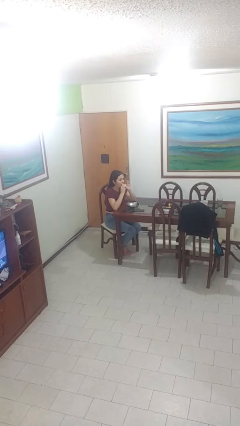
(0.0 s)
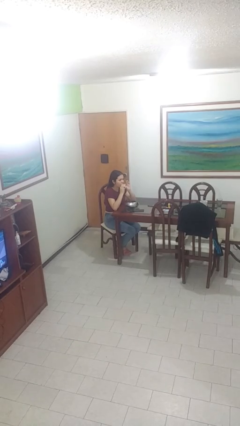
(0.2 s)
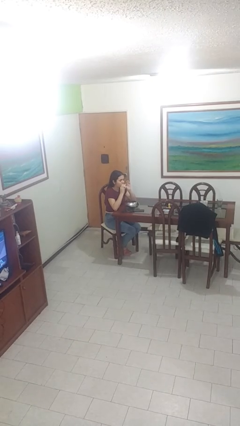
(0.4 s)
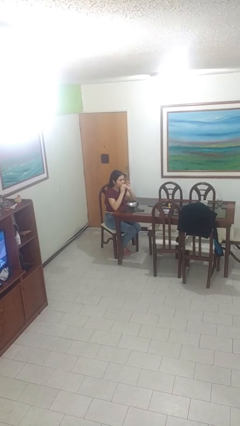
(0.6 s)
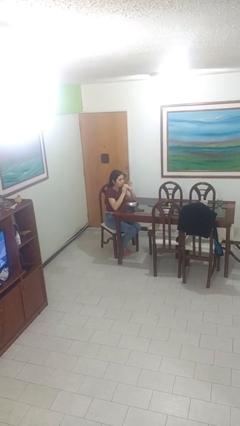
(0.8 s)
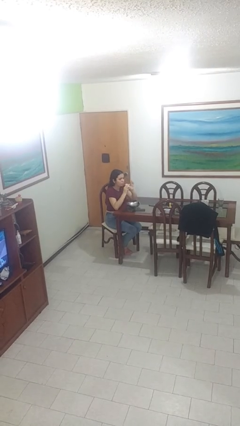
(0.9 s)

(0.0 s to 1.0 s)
person eats with hands

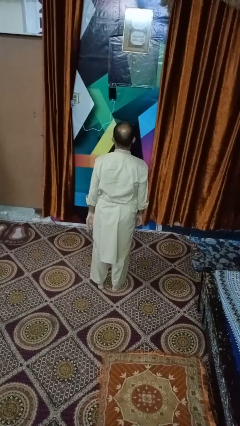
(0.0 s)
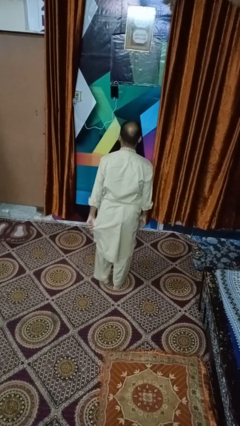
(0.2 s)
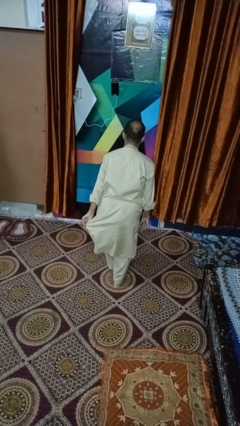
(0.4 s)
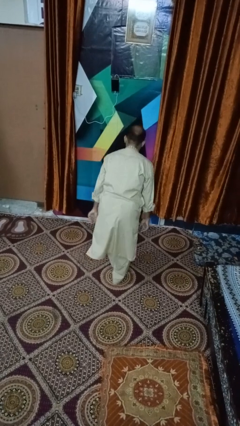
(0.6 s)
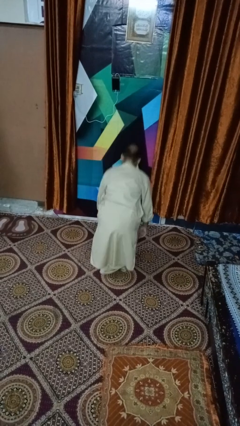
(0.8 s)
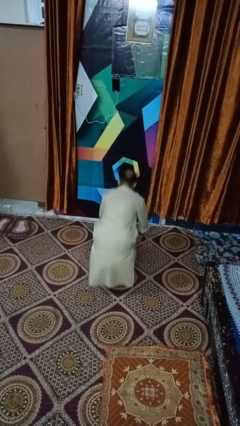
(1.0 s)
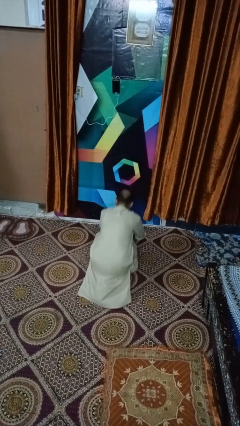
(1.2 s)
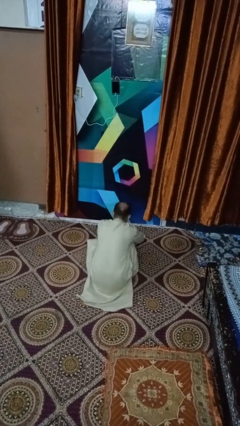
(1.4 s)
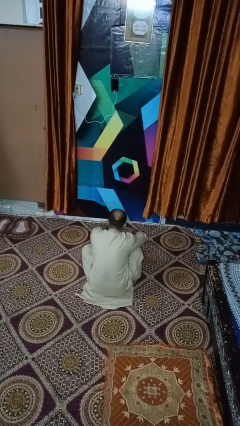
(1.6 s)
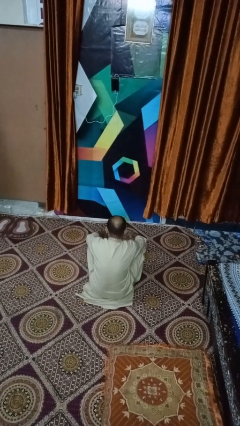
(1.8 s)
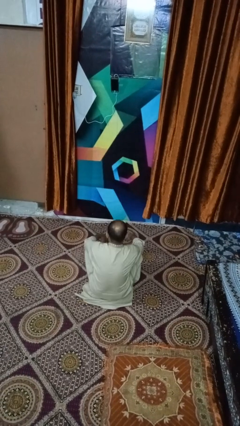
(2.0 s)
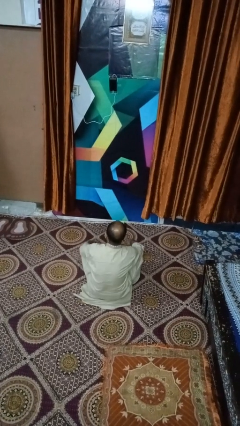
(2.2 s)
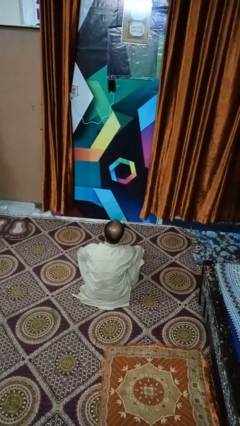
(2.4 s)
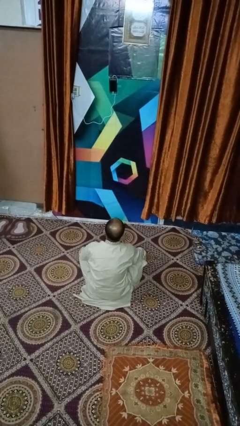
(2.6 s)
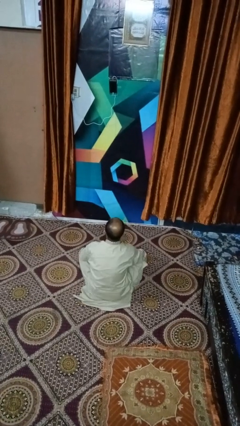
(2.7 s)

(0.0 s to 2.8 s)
person sits crisscross

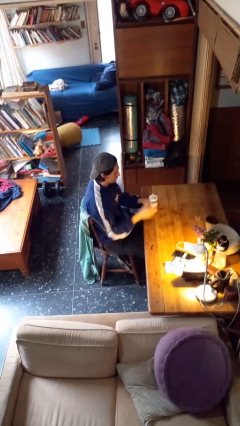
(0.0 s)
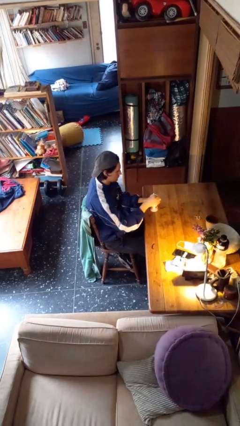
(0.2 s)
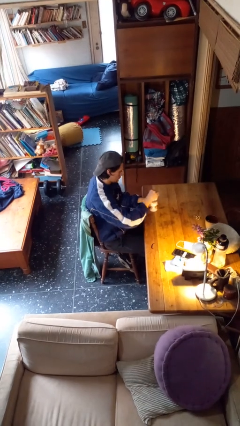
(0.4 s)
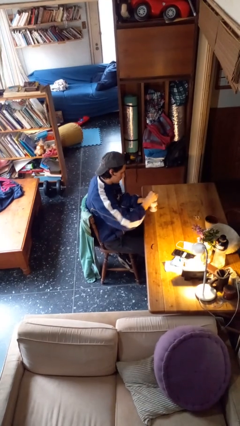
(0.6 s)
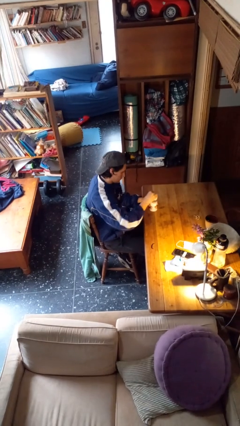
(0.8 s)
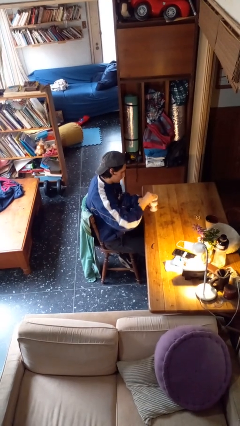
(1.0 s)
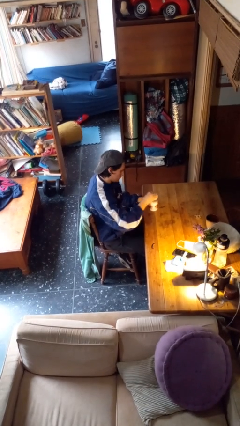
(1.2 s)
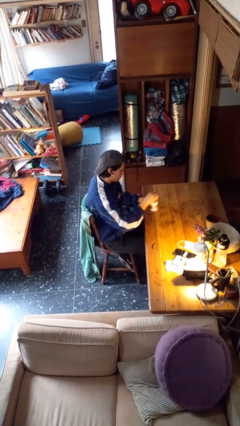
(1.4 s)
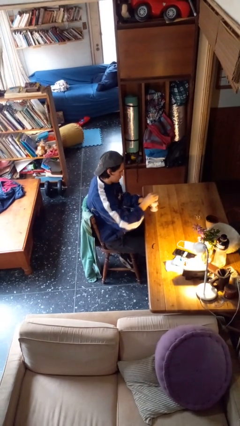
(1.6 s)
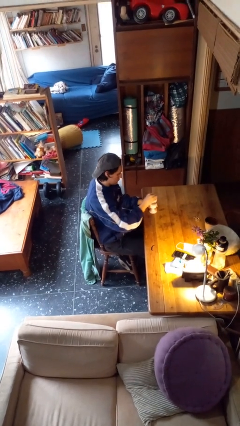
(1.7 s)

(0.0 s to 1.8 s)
person stirs mug

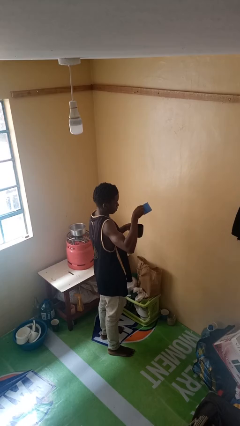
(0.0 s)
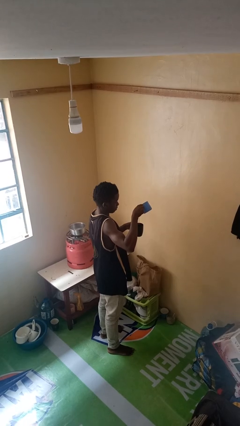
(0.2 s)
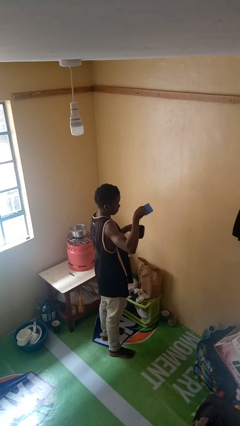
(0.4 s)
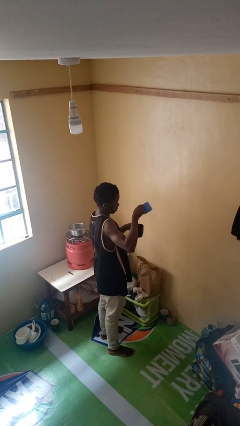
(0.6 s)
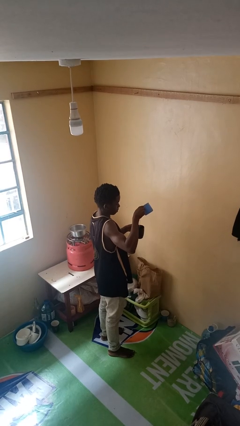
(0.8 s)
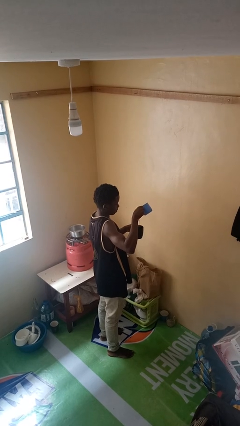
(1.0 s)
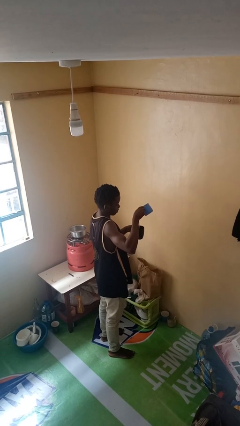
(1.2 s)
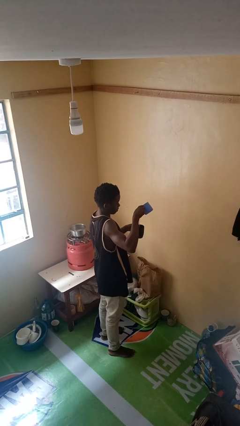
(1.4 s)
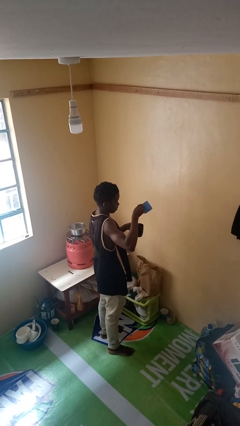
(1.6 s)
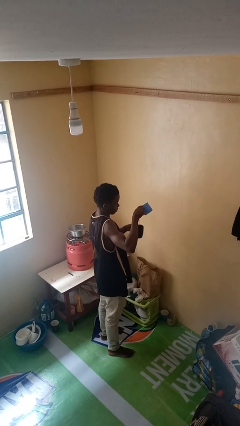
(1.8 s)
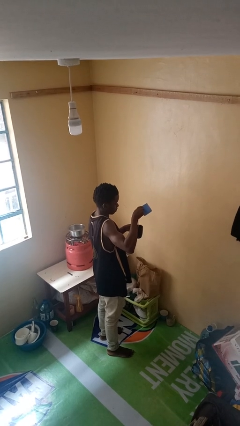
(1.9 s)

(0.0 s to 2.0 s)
person pours coffee into mug

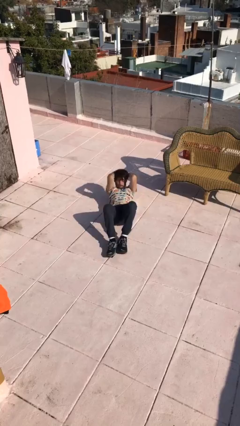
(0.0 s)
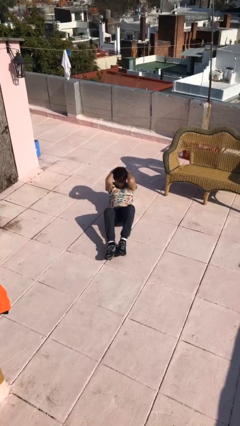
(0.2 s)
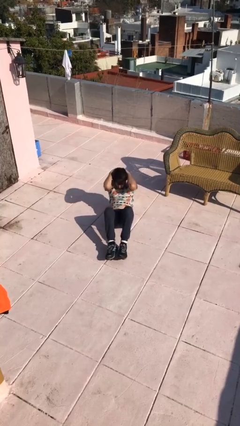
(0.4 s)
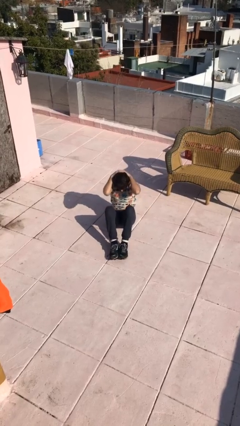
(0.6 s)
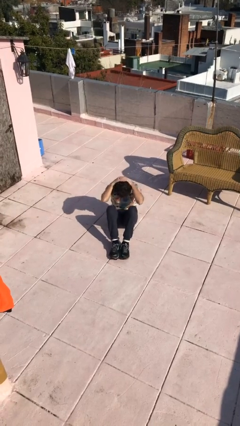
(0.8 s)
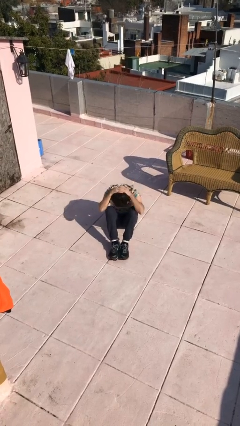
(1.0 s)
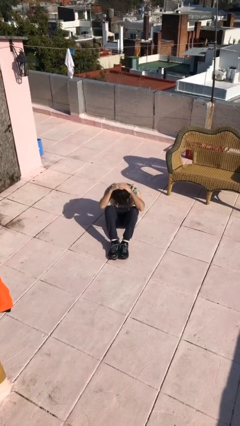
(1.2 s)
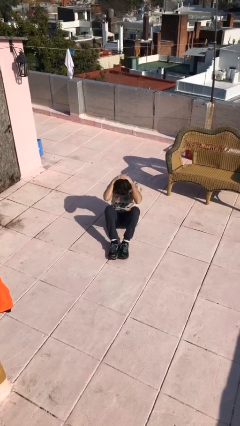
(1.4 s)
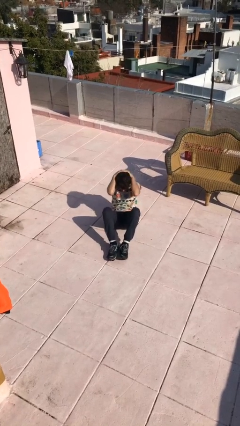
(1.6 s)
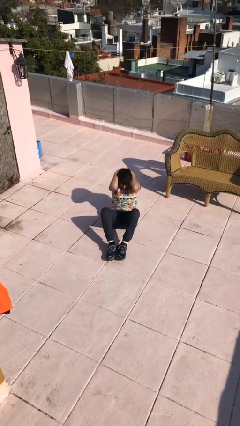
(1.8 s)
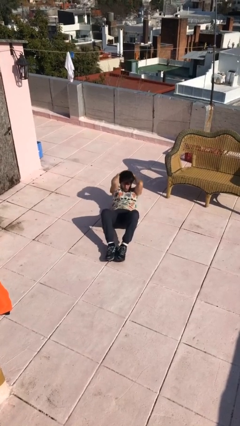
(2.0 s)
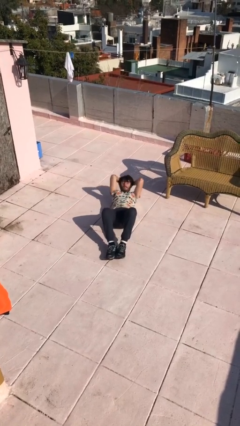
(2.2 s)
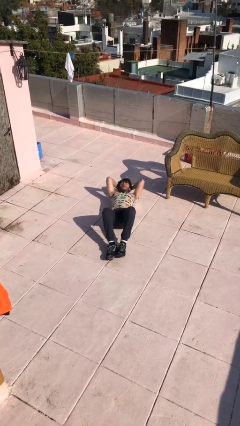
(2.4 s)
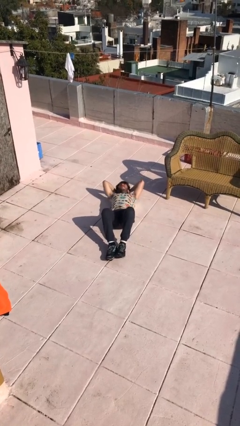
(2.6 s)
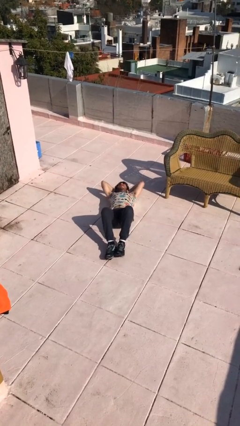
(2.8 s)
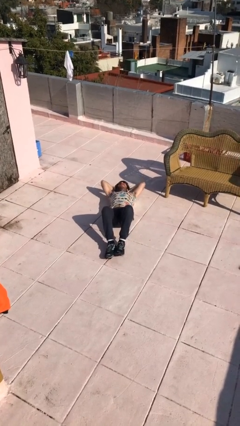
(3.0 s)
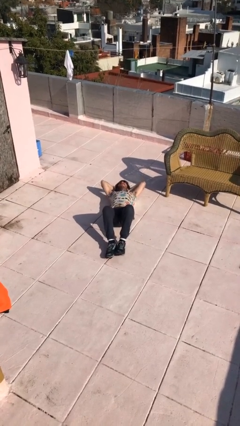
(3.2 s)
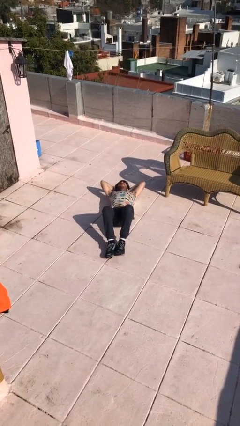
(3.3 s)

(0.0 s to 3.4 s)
person exercises with situp

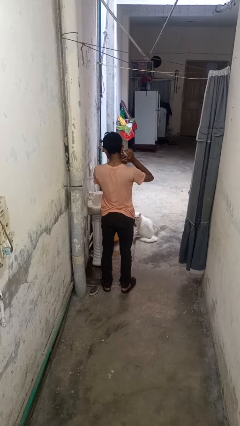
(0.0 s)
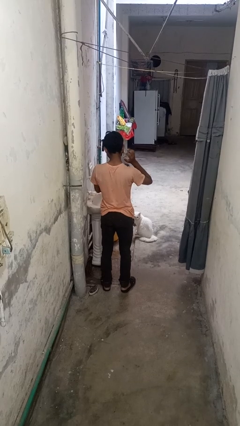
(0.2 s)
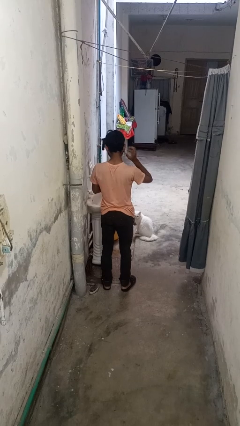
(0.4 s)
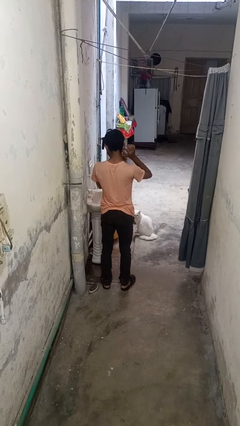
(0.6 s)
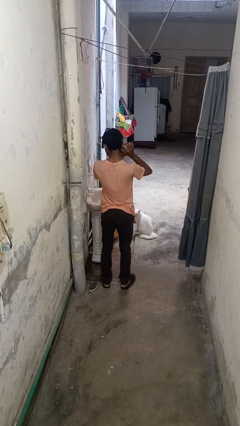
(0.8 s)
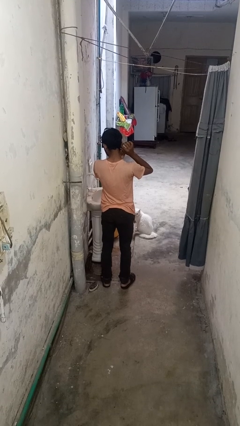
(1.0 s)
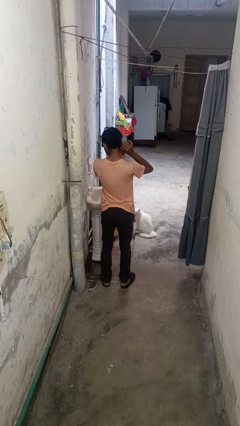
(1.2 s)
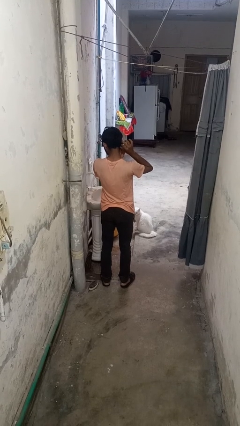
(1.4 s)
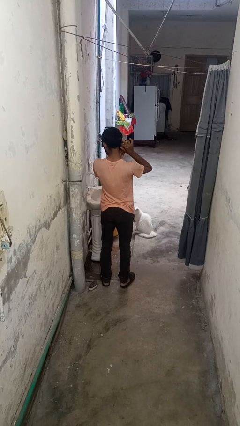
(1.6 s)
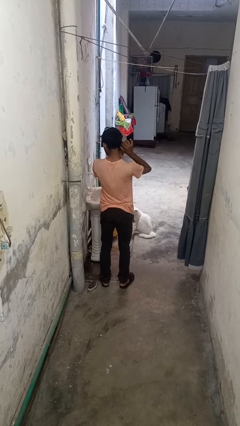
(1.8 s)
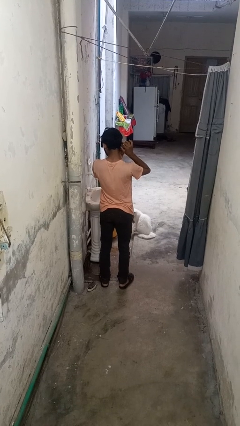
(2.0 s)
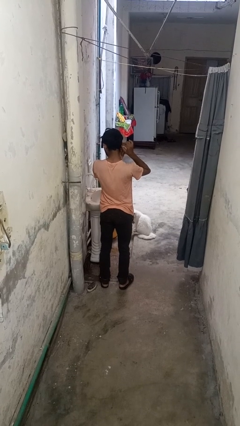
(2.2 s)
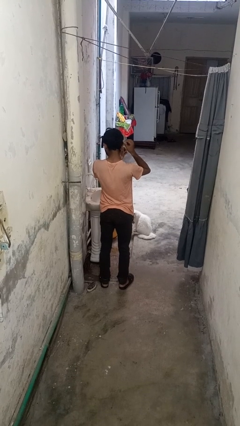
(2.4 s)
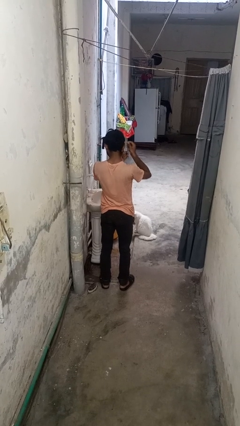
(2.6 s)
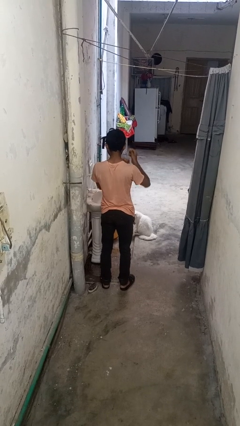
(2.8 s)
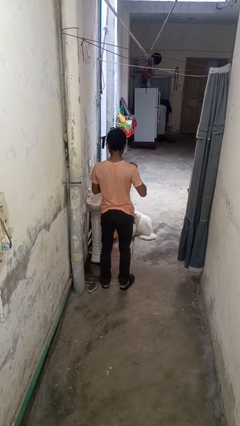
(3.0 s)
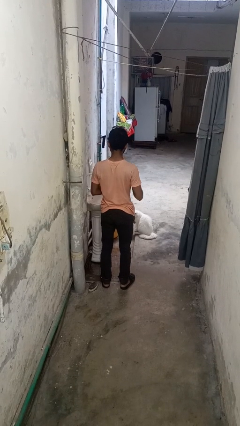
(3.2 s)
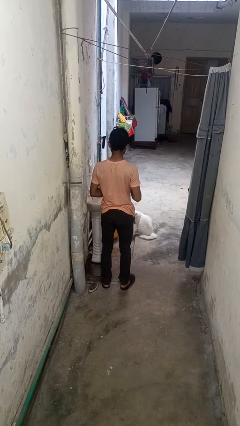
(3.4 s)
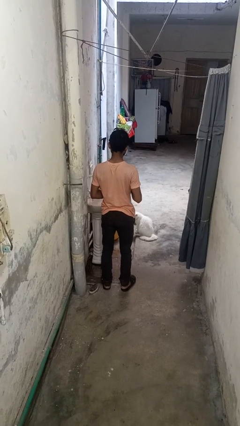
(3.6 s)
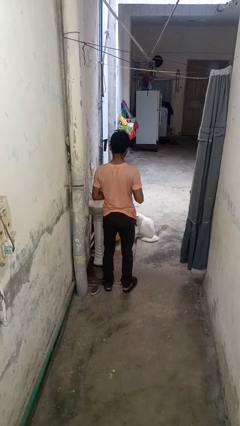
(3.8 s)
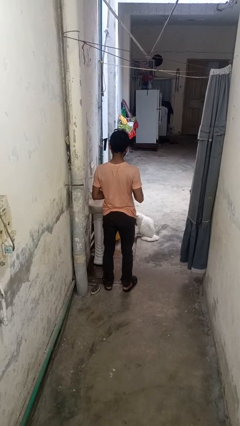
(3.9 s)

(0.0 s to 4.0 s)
person takes off earrings

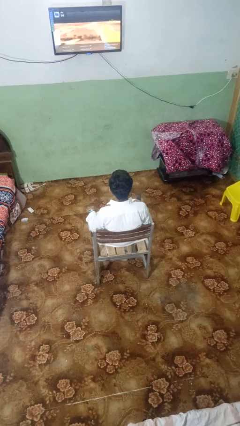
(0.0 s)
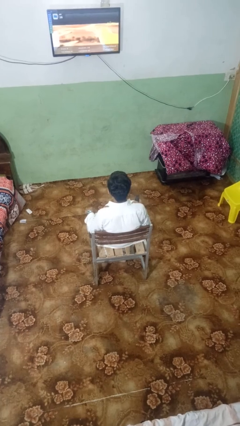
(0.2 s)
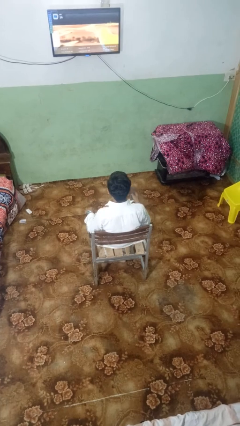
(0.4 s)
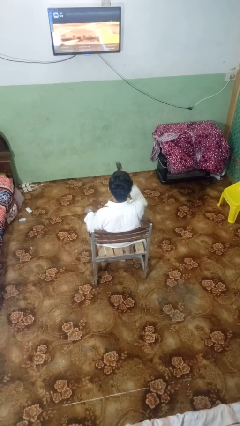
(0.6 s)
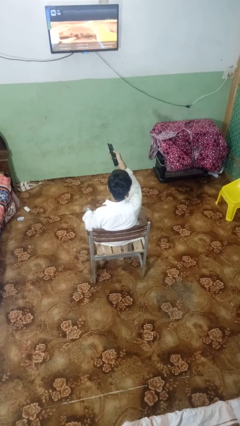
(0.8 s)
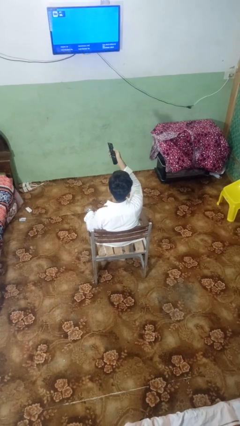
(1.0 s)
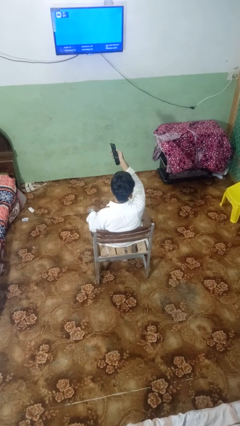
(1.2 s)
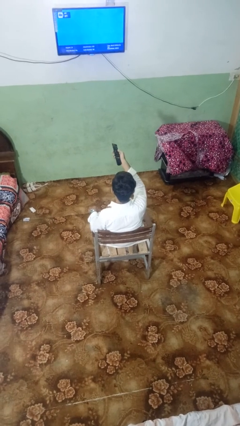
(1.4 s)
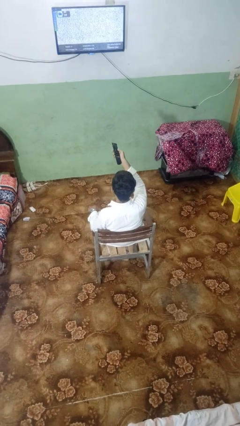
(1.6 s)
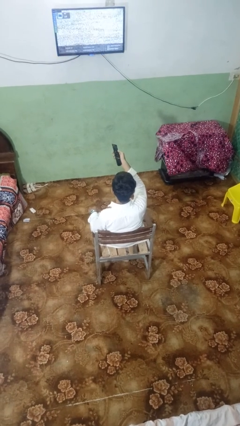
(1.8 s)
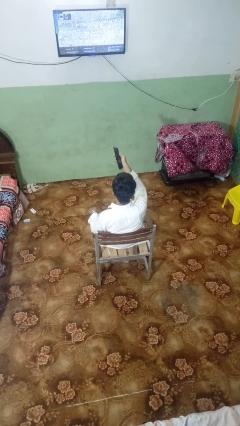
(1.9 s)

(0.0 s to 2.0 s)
person uses television remote

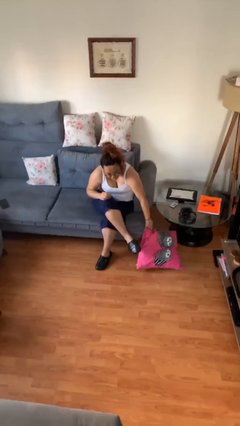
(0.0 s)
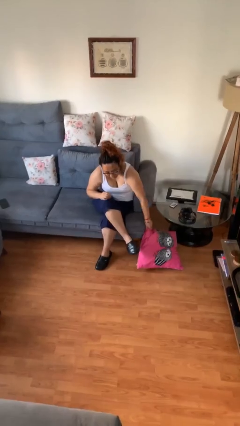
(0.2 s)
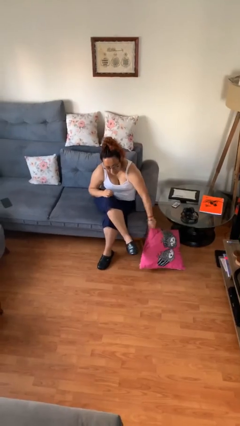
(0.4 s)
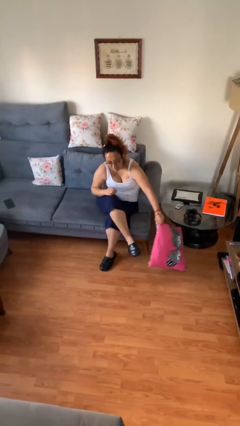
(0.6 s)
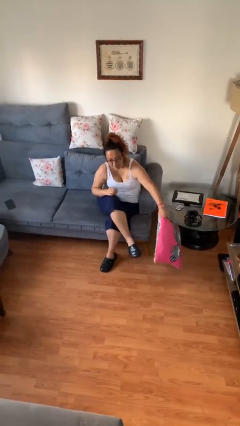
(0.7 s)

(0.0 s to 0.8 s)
person picks up object from floor
